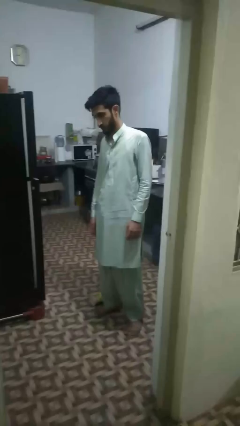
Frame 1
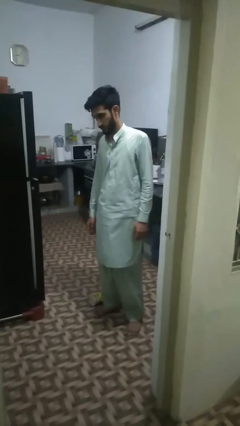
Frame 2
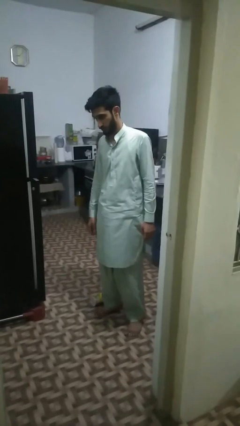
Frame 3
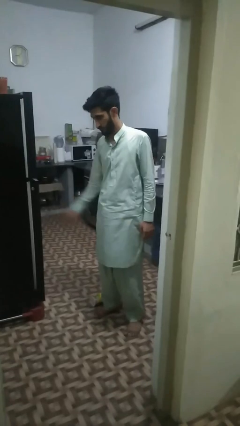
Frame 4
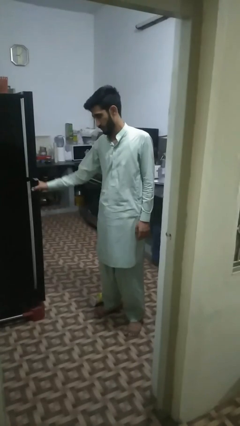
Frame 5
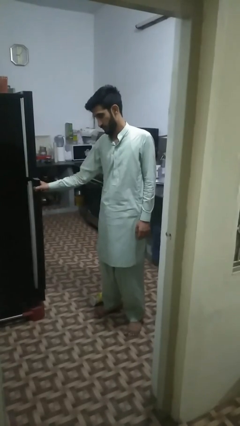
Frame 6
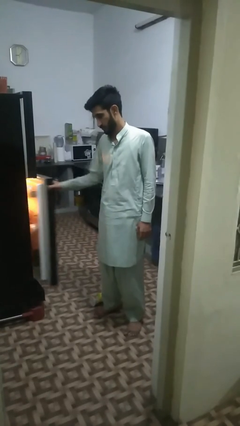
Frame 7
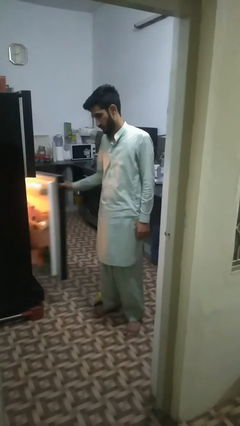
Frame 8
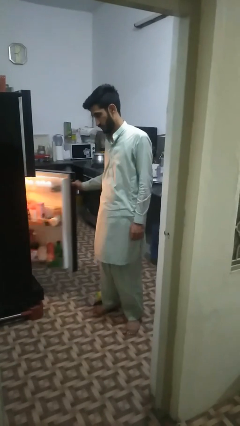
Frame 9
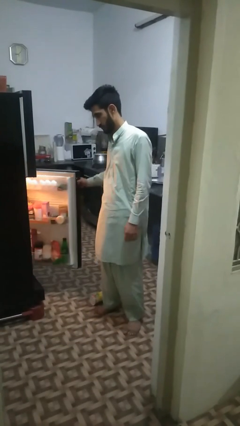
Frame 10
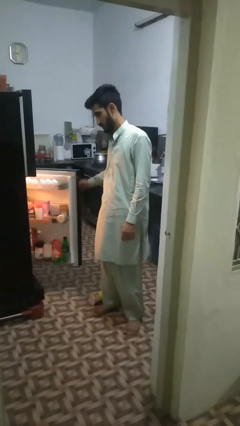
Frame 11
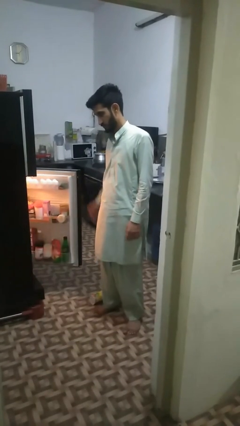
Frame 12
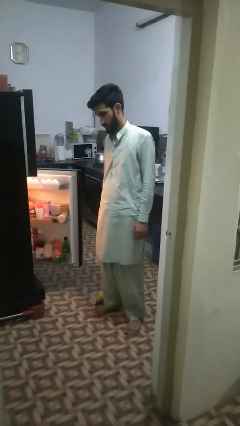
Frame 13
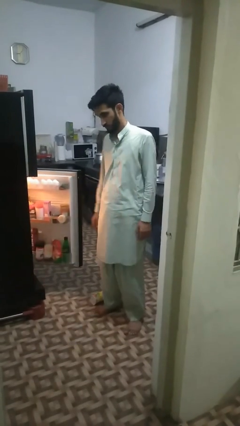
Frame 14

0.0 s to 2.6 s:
person opens refrigerator

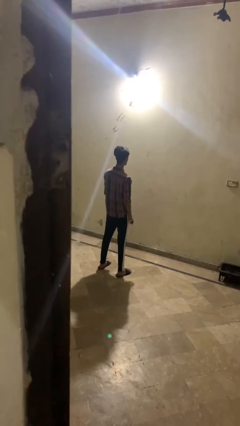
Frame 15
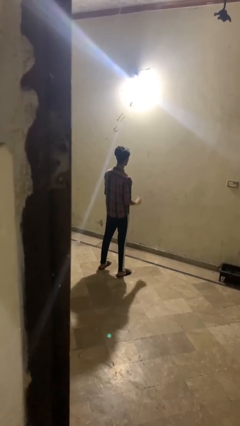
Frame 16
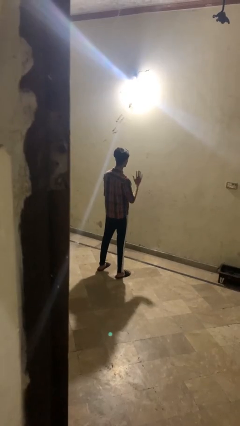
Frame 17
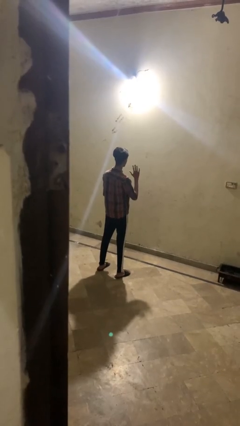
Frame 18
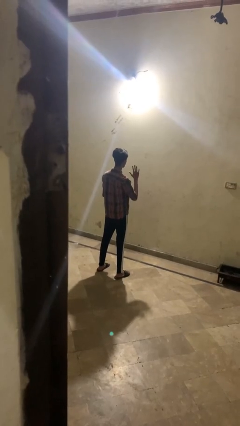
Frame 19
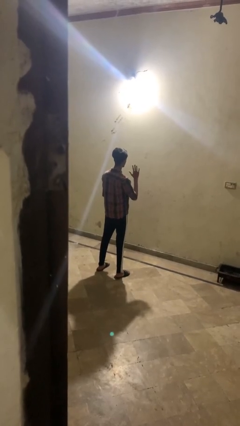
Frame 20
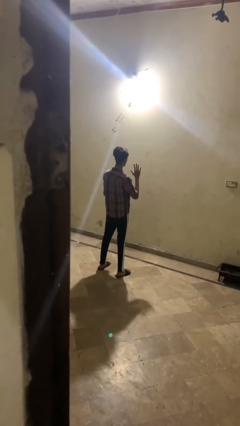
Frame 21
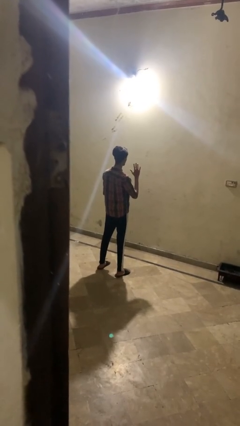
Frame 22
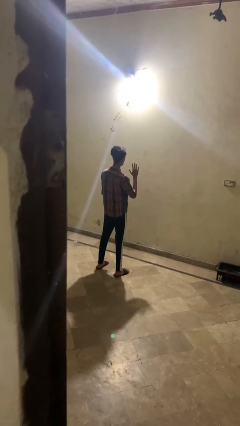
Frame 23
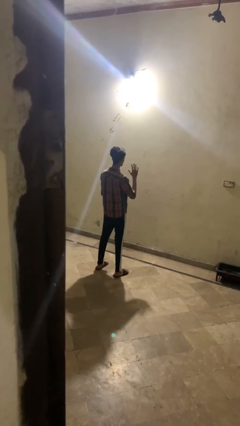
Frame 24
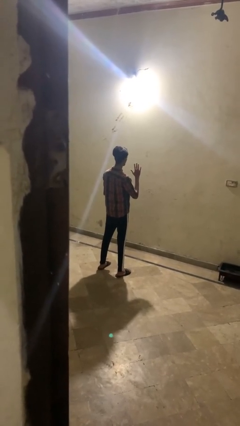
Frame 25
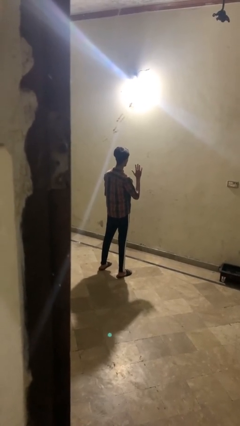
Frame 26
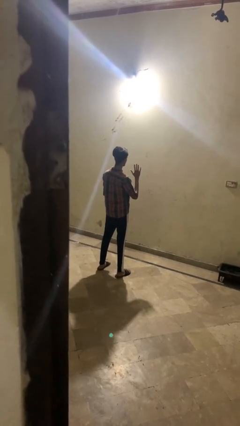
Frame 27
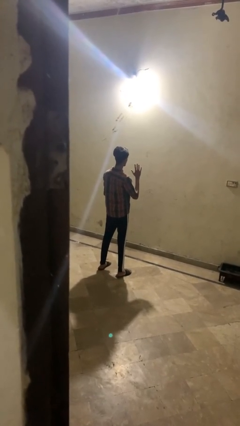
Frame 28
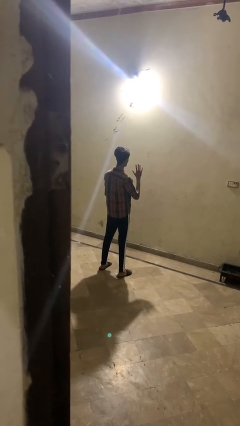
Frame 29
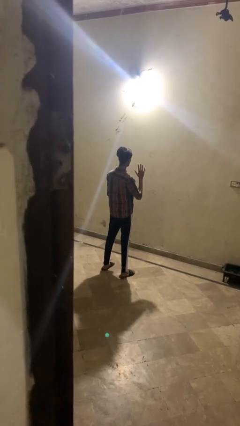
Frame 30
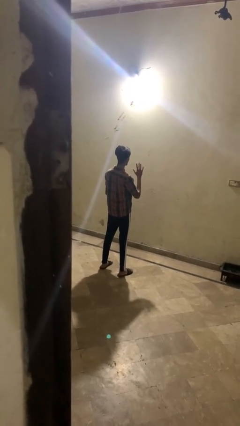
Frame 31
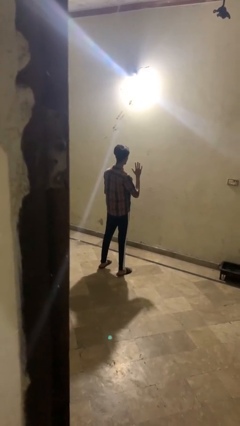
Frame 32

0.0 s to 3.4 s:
person gestures number five

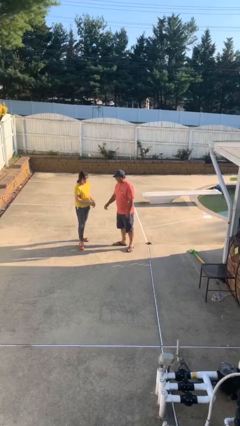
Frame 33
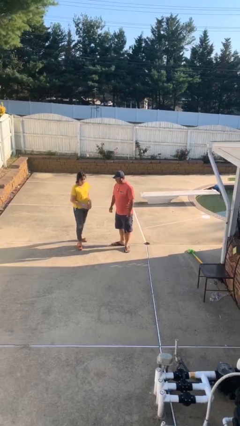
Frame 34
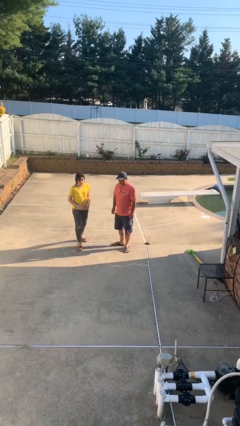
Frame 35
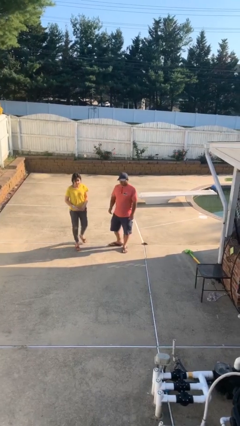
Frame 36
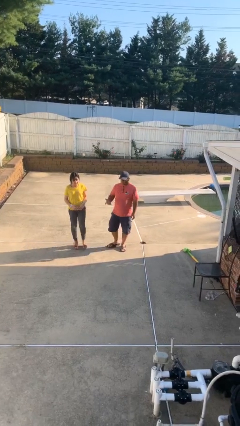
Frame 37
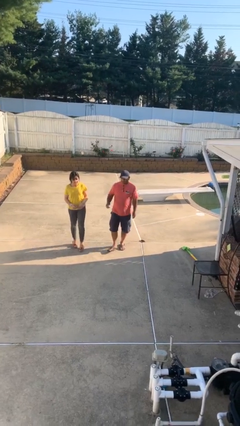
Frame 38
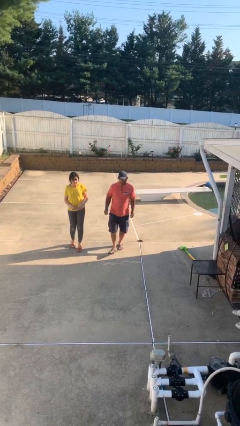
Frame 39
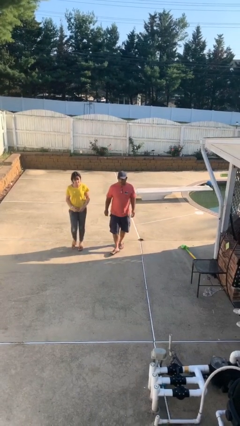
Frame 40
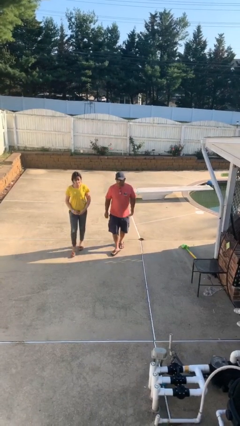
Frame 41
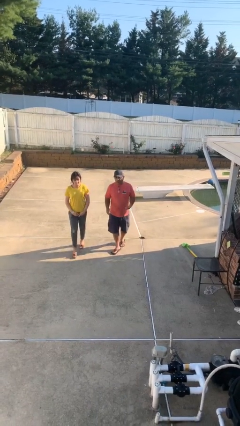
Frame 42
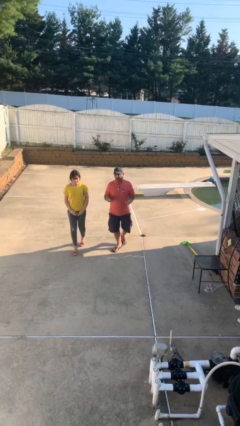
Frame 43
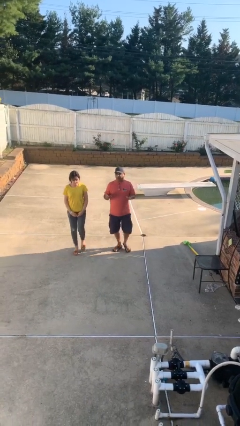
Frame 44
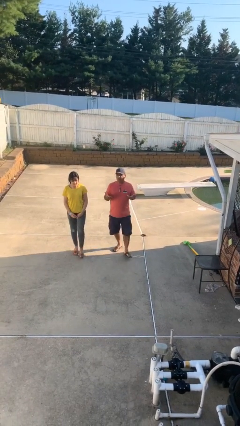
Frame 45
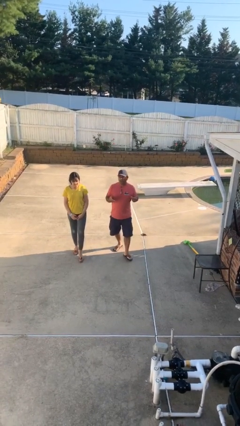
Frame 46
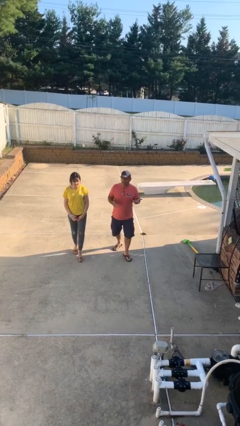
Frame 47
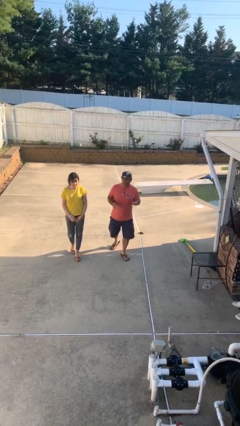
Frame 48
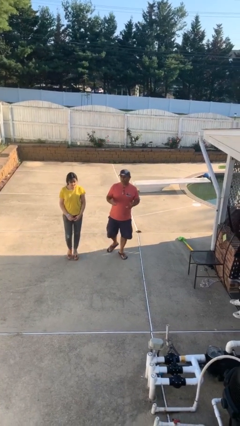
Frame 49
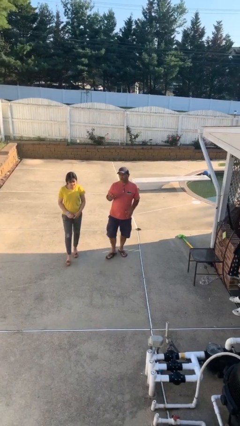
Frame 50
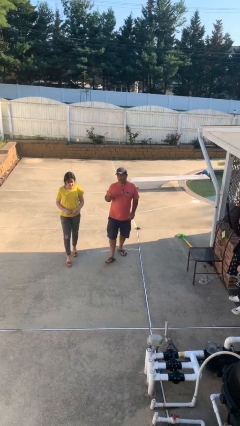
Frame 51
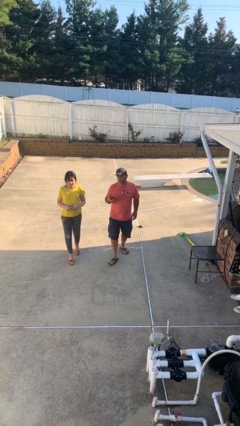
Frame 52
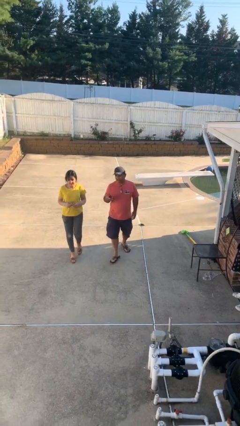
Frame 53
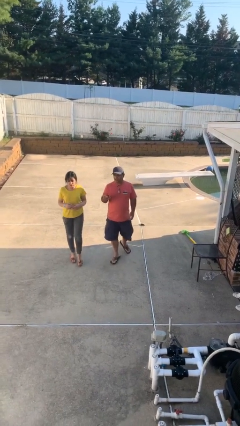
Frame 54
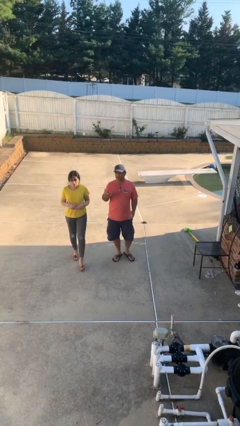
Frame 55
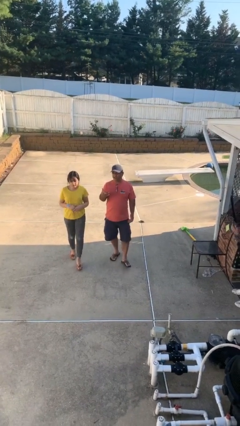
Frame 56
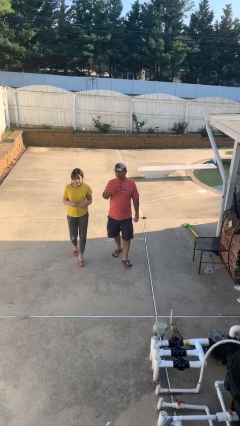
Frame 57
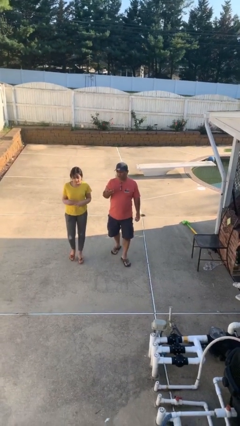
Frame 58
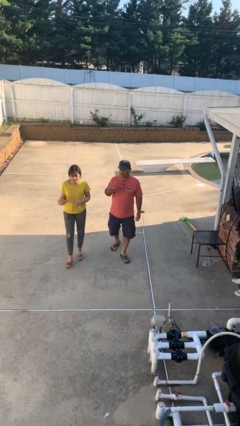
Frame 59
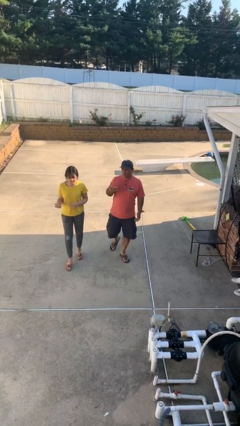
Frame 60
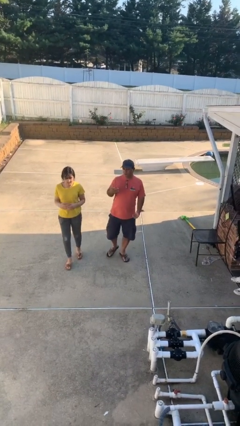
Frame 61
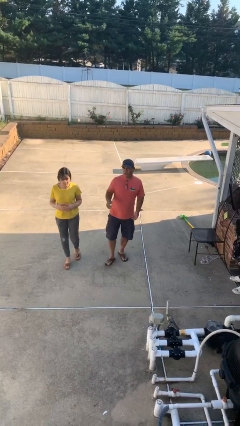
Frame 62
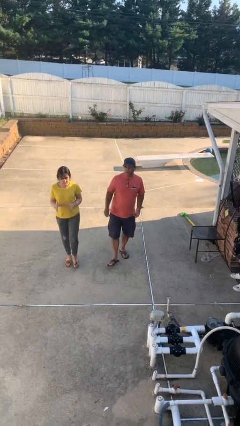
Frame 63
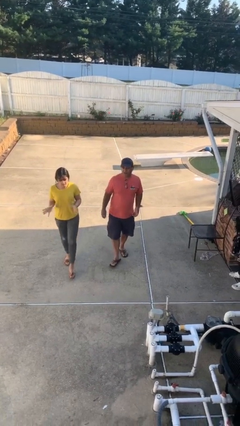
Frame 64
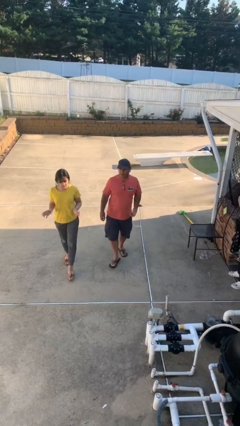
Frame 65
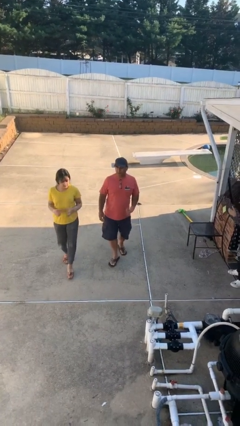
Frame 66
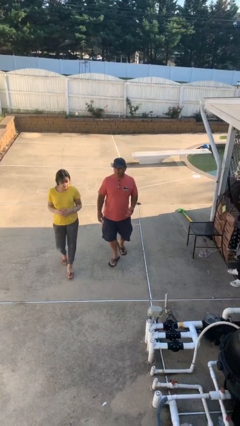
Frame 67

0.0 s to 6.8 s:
person talks to person

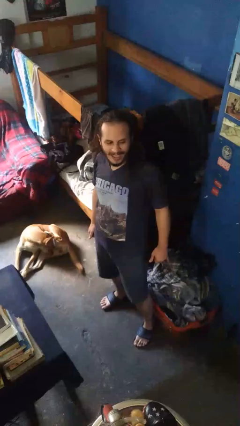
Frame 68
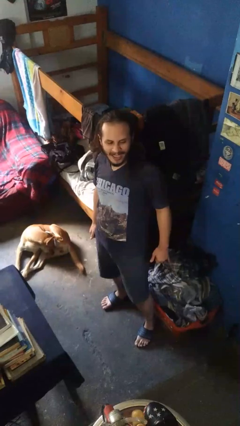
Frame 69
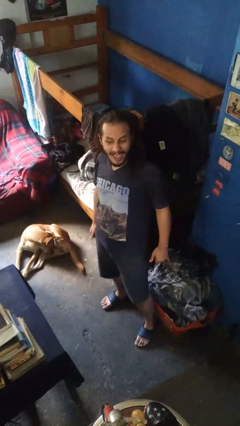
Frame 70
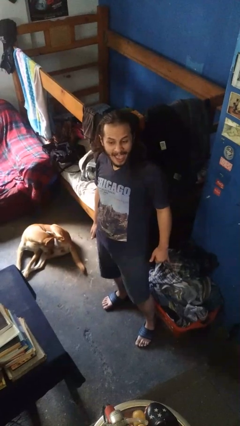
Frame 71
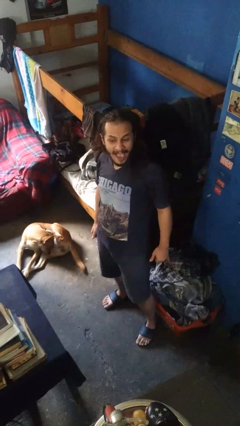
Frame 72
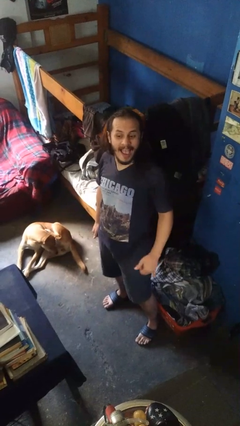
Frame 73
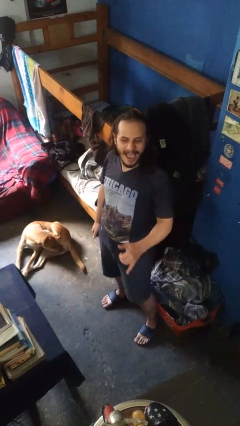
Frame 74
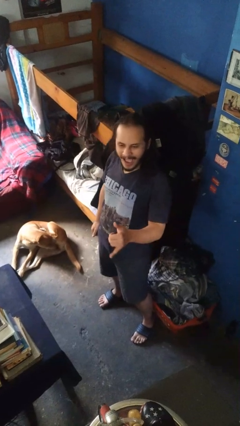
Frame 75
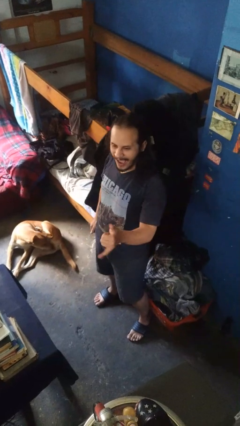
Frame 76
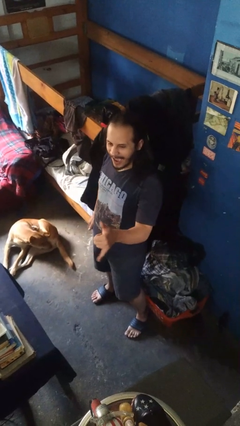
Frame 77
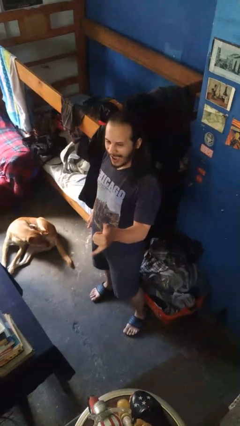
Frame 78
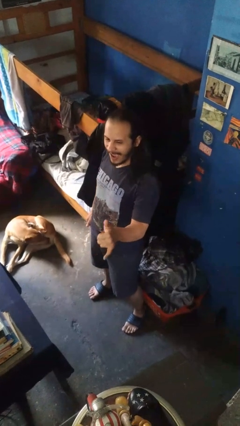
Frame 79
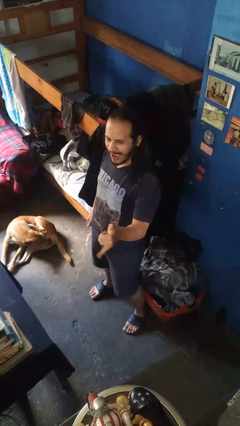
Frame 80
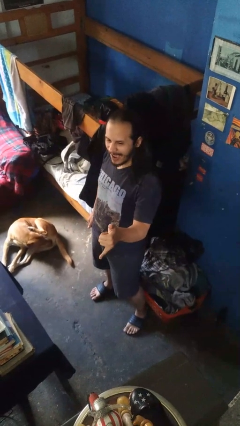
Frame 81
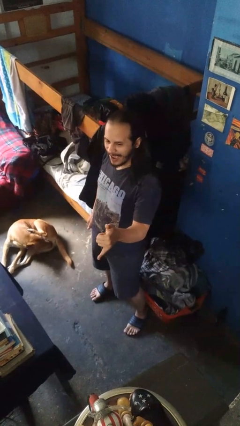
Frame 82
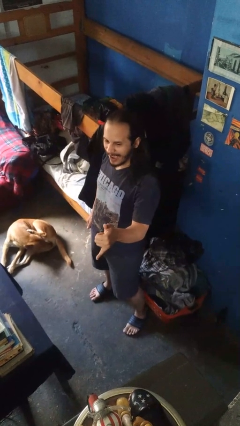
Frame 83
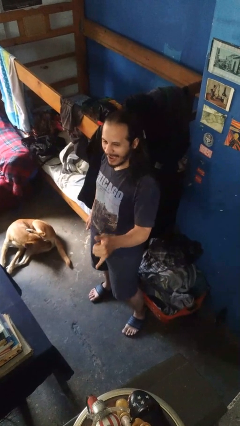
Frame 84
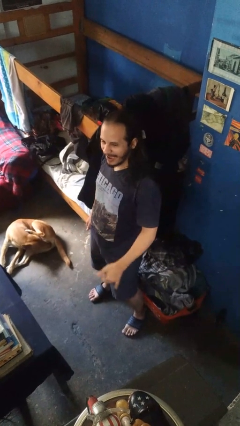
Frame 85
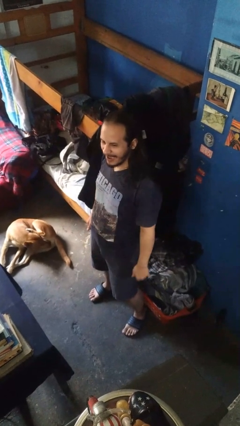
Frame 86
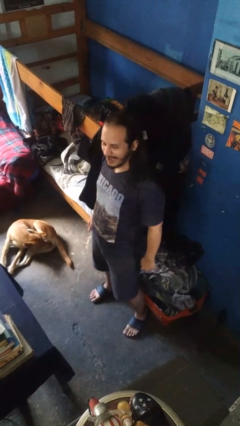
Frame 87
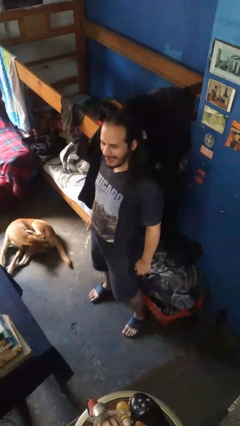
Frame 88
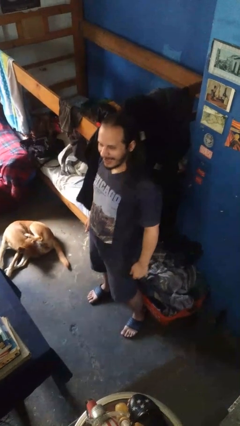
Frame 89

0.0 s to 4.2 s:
person gestures hang loose

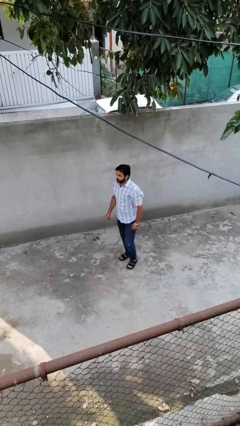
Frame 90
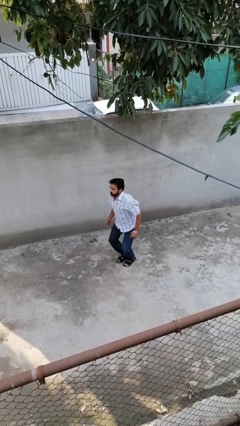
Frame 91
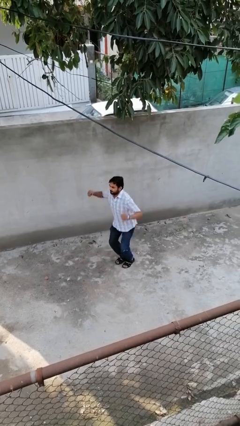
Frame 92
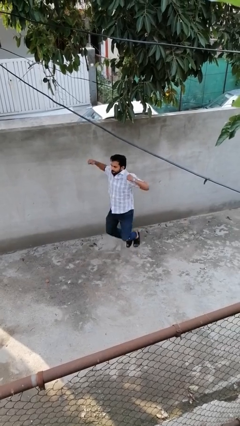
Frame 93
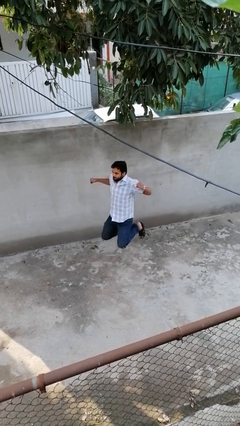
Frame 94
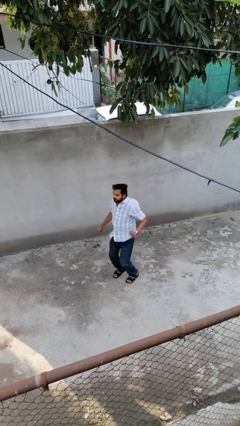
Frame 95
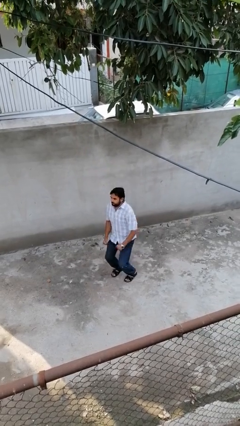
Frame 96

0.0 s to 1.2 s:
person jumps
